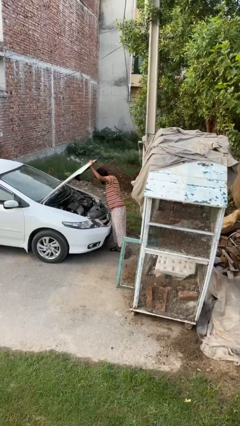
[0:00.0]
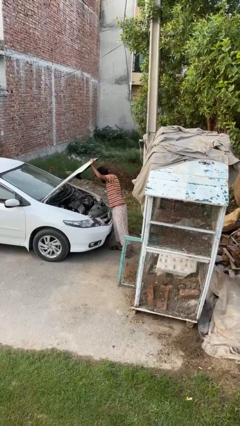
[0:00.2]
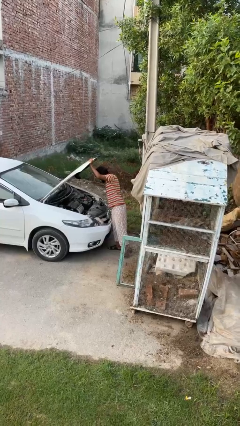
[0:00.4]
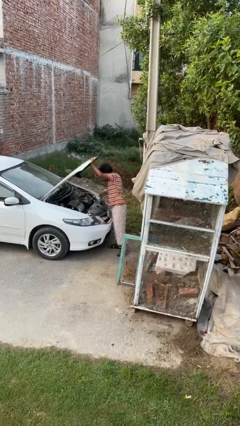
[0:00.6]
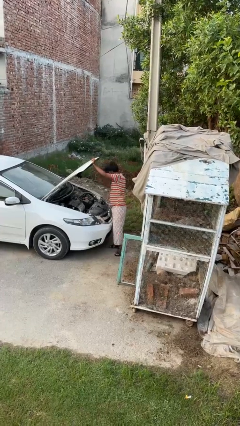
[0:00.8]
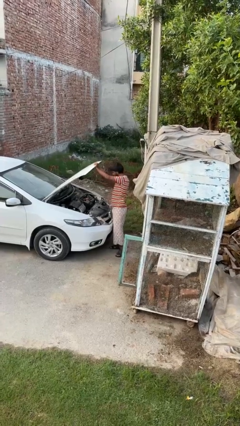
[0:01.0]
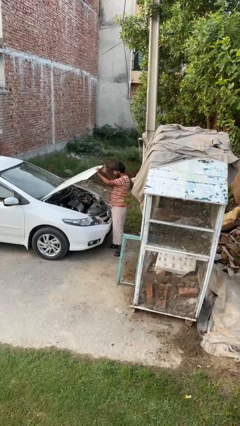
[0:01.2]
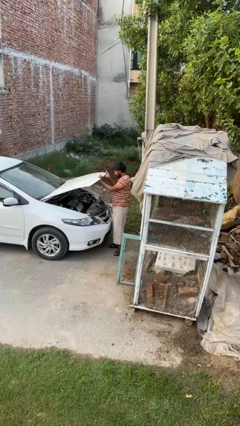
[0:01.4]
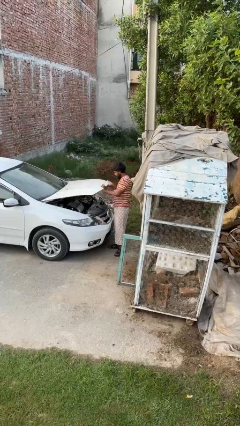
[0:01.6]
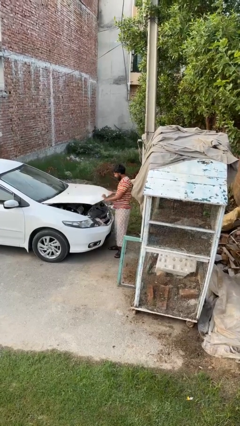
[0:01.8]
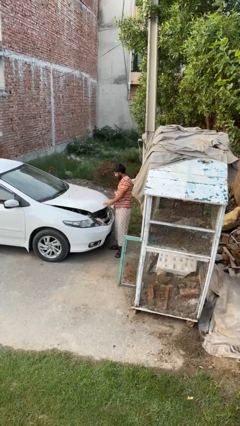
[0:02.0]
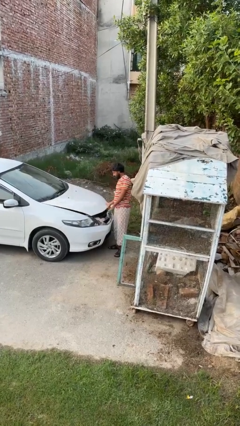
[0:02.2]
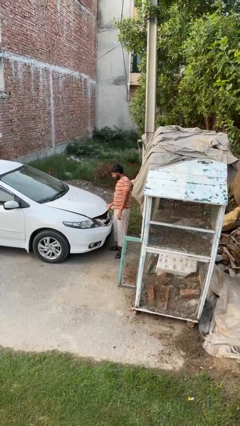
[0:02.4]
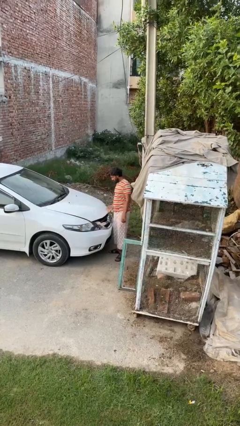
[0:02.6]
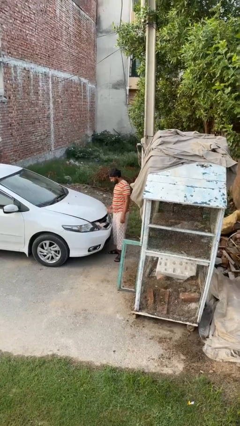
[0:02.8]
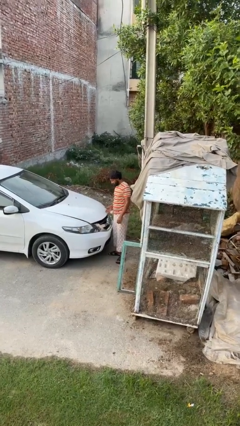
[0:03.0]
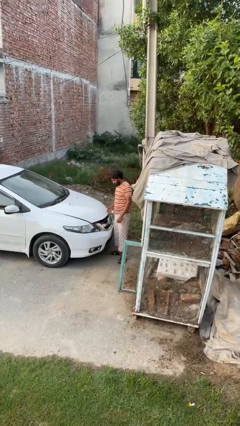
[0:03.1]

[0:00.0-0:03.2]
person closes car hood

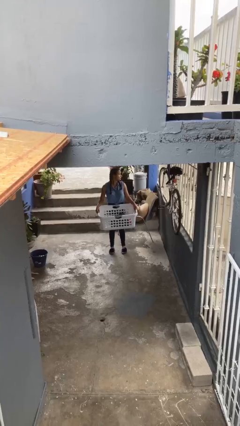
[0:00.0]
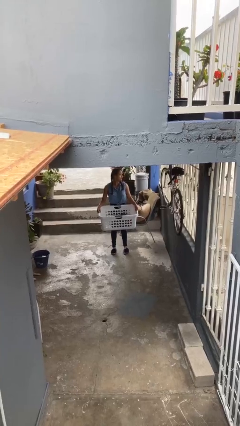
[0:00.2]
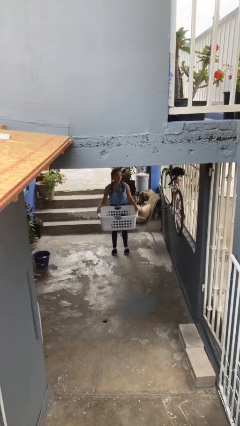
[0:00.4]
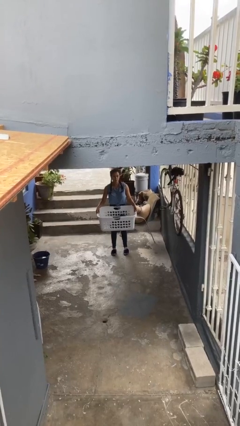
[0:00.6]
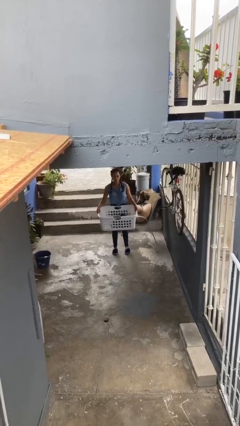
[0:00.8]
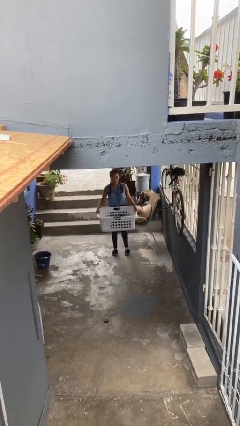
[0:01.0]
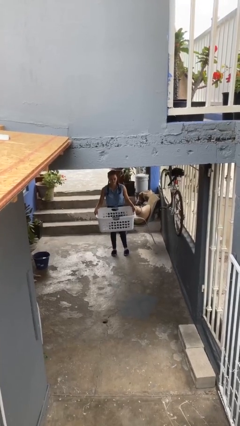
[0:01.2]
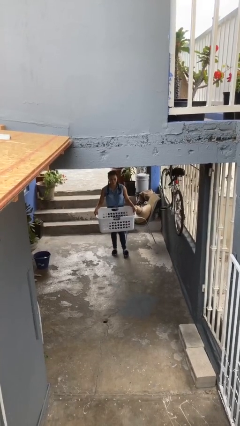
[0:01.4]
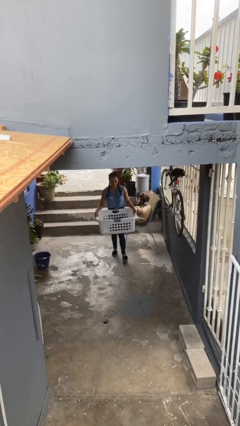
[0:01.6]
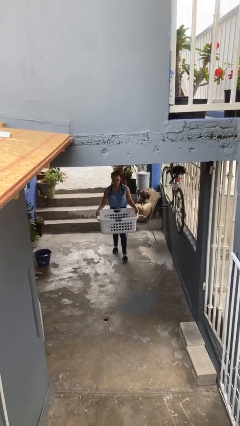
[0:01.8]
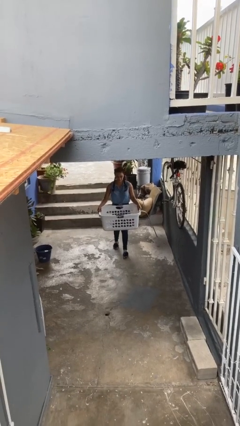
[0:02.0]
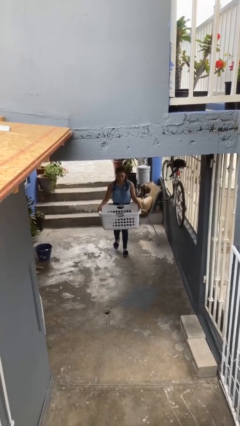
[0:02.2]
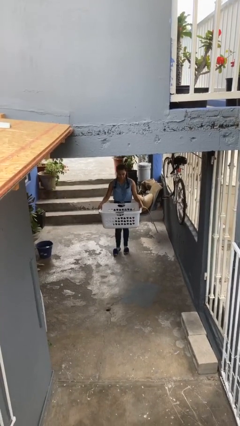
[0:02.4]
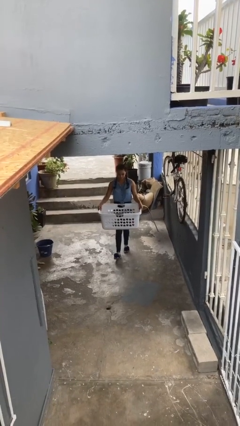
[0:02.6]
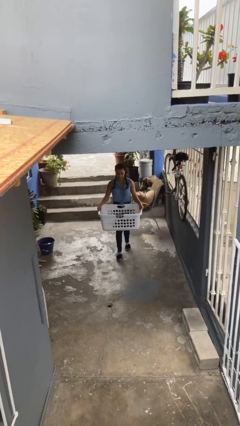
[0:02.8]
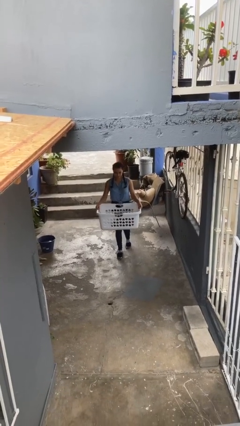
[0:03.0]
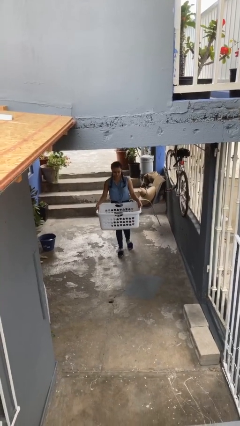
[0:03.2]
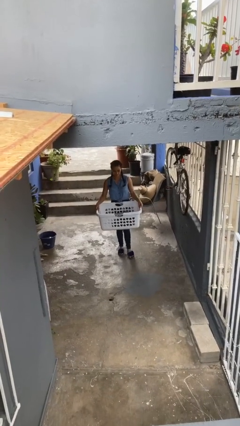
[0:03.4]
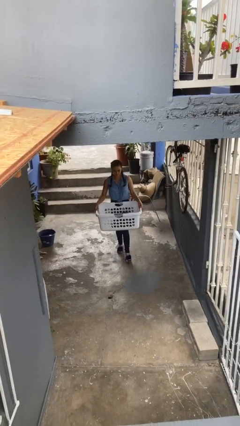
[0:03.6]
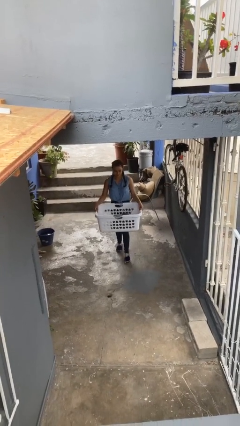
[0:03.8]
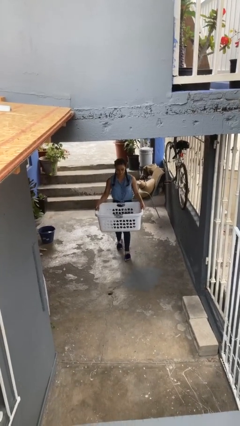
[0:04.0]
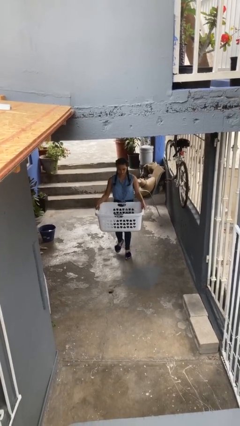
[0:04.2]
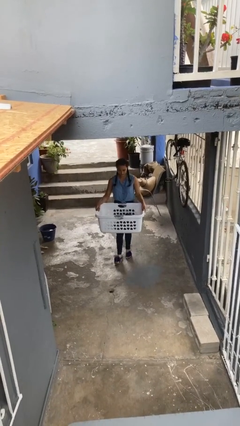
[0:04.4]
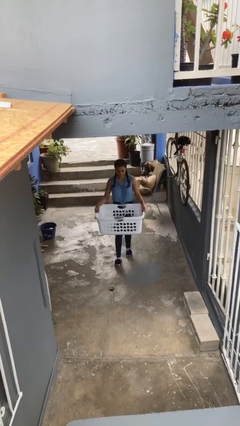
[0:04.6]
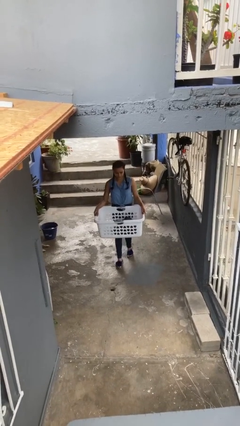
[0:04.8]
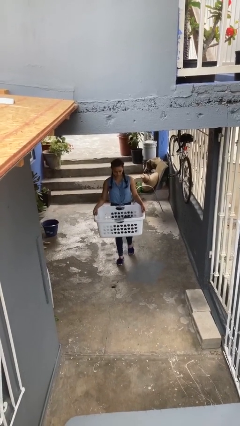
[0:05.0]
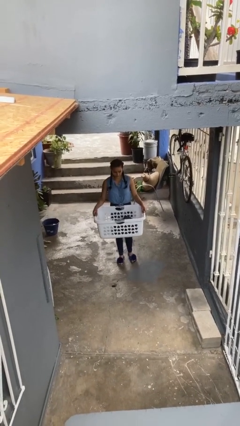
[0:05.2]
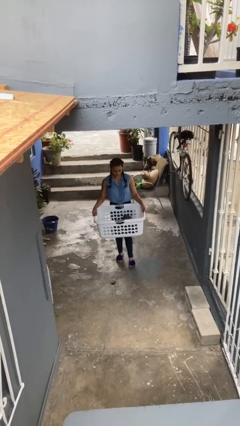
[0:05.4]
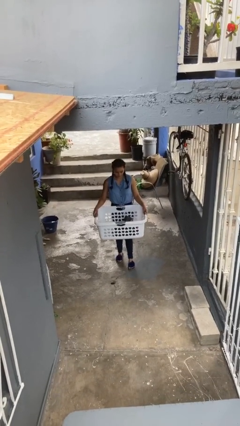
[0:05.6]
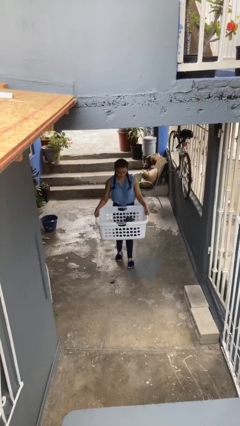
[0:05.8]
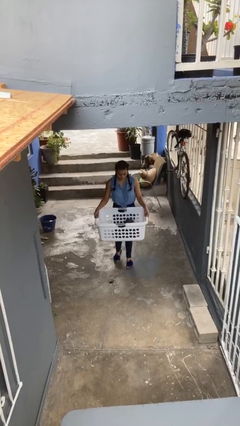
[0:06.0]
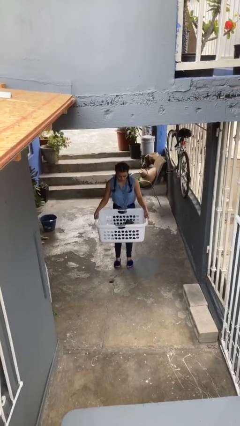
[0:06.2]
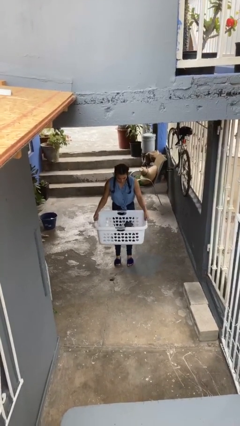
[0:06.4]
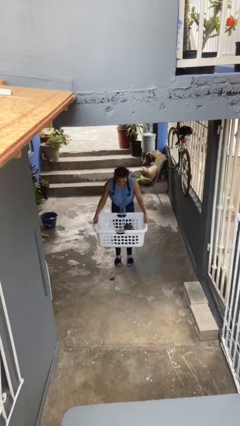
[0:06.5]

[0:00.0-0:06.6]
person carries heavy object

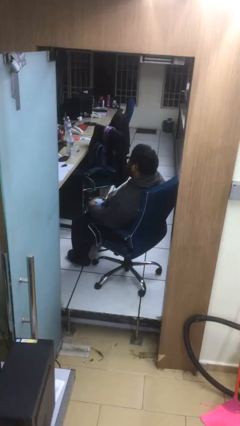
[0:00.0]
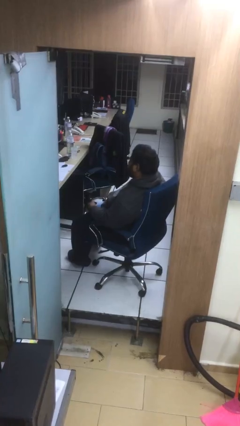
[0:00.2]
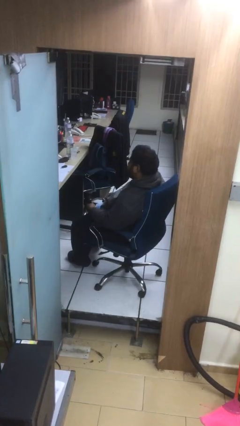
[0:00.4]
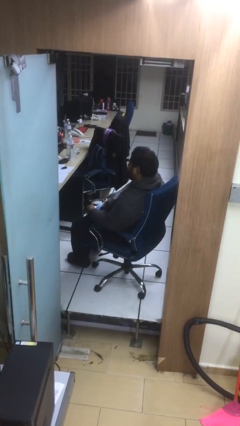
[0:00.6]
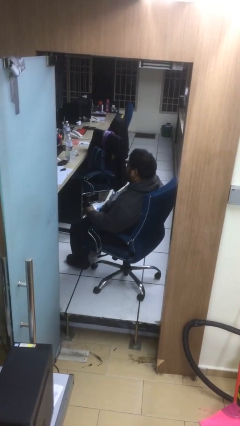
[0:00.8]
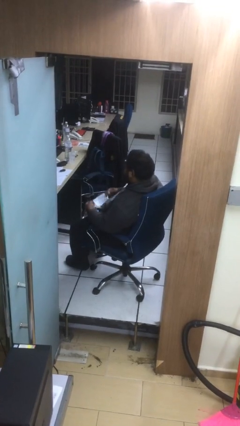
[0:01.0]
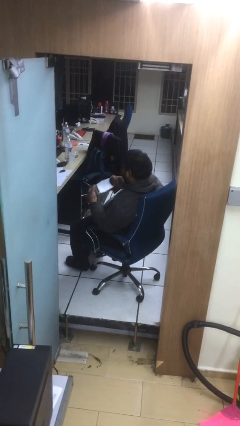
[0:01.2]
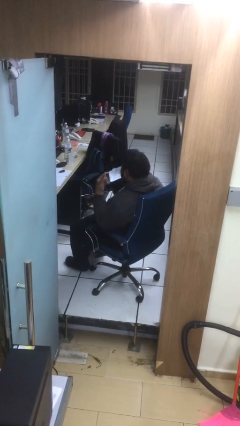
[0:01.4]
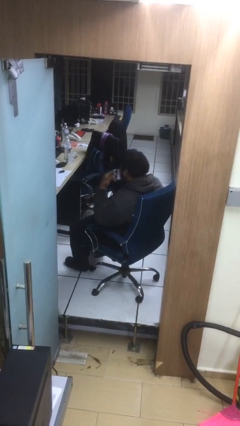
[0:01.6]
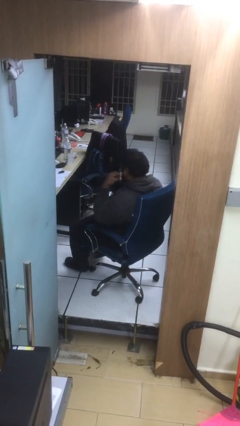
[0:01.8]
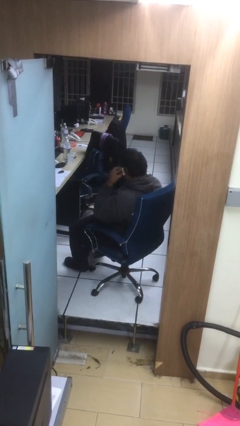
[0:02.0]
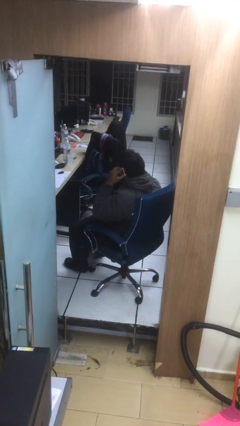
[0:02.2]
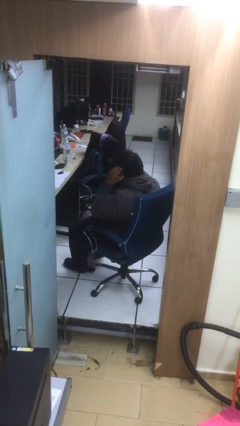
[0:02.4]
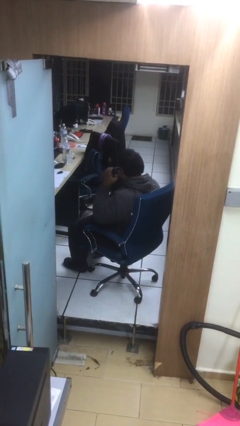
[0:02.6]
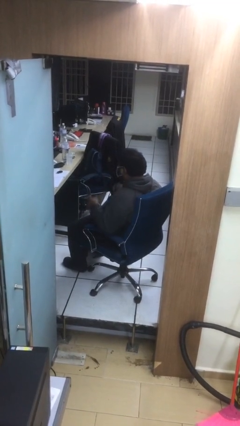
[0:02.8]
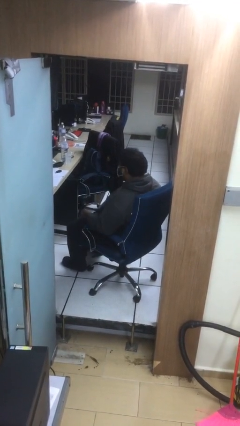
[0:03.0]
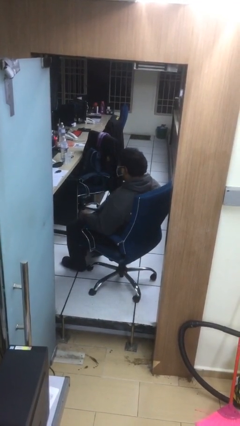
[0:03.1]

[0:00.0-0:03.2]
person puts on facemask

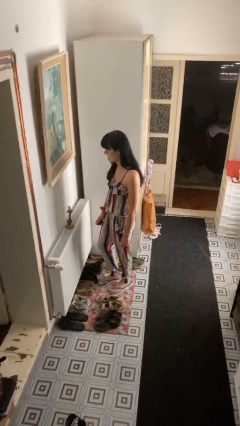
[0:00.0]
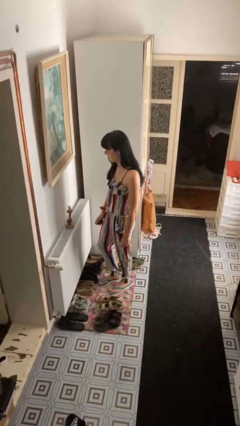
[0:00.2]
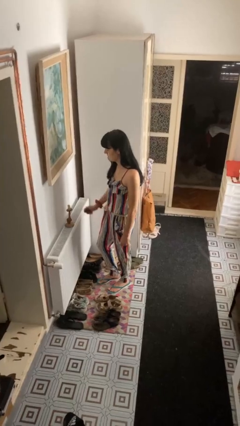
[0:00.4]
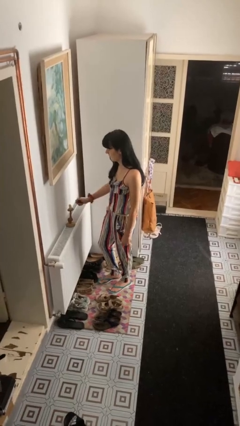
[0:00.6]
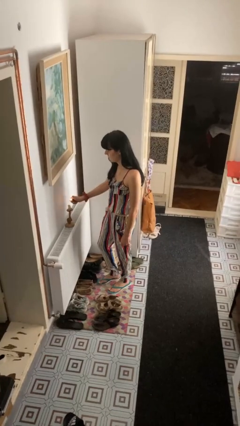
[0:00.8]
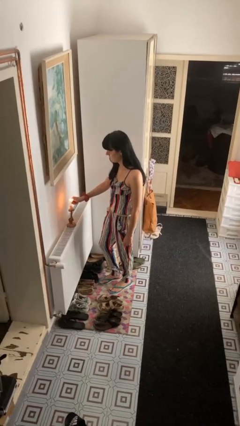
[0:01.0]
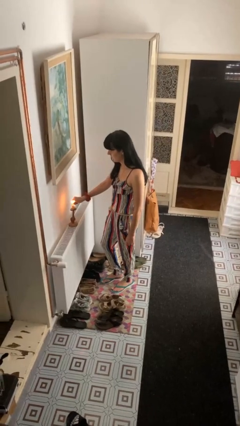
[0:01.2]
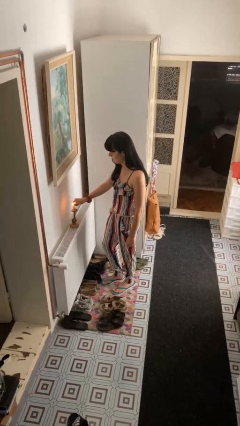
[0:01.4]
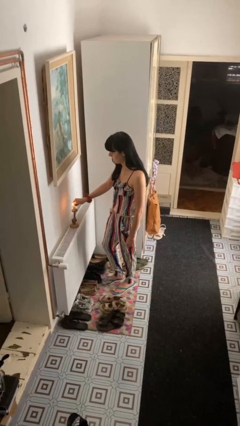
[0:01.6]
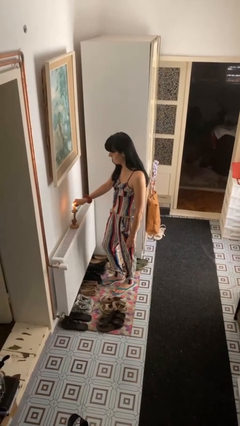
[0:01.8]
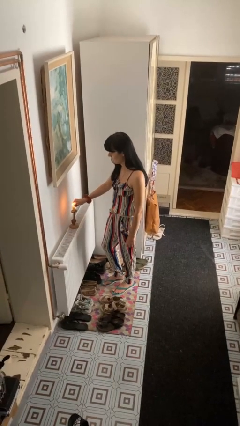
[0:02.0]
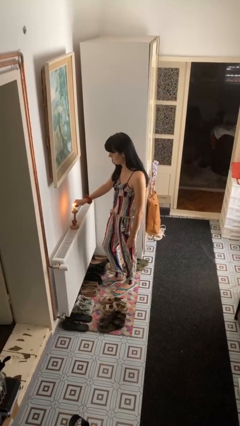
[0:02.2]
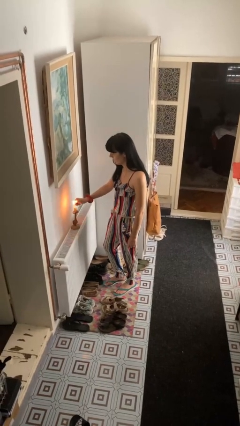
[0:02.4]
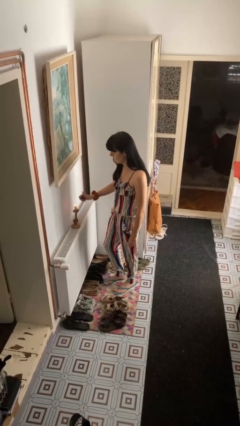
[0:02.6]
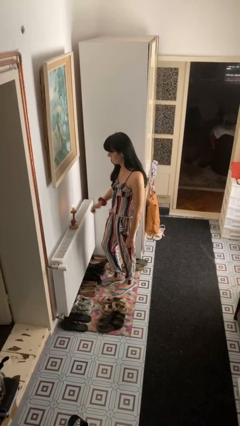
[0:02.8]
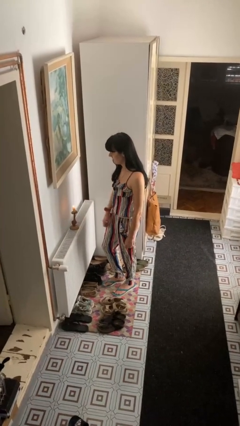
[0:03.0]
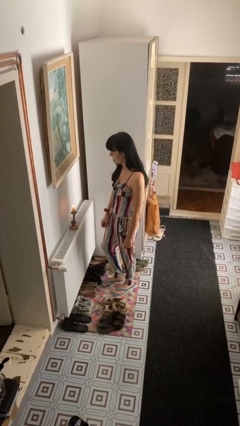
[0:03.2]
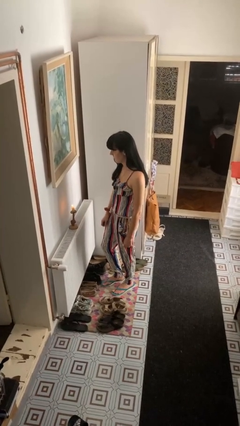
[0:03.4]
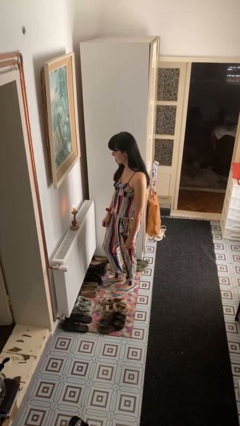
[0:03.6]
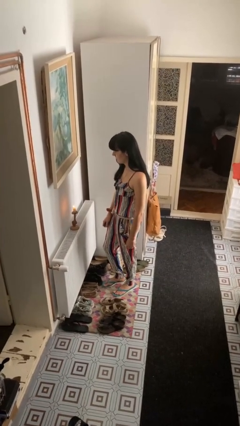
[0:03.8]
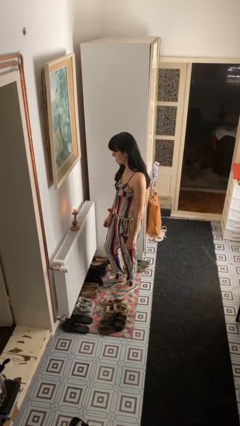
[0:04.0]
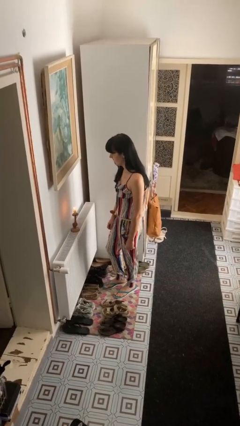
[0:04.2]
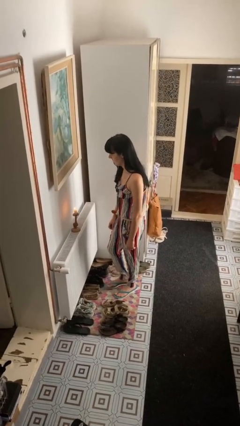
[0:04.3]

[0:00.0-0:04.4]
person lights candle

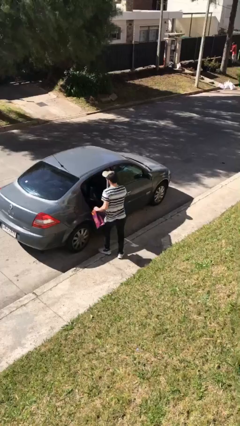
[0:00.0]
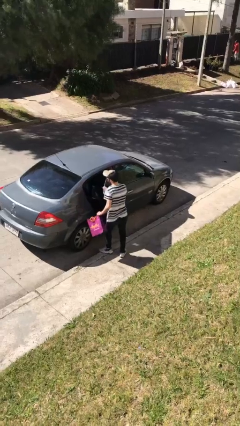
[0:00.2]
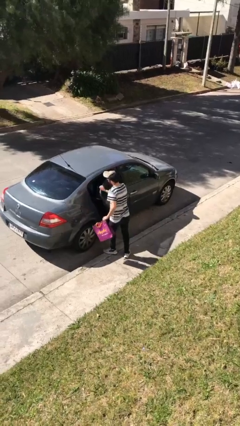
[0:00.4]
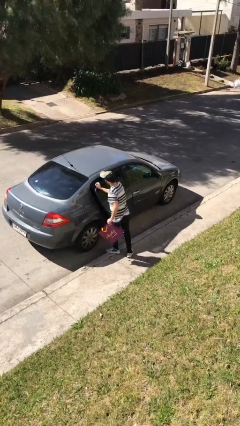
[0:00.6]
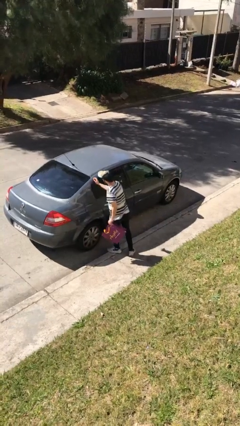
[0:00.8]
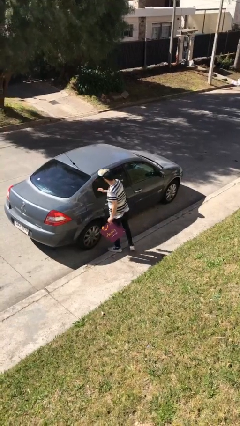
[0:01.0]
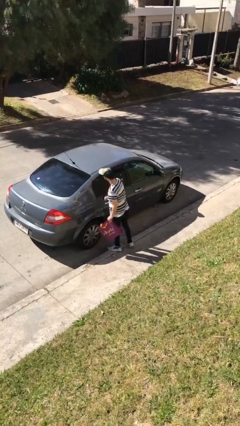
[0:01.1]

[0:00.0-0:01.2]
person closes car door
